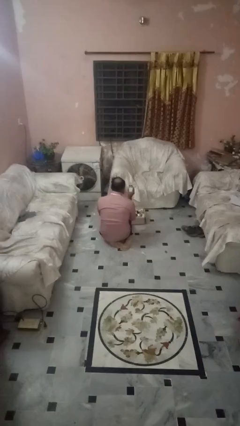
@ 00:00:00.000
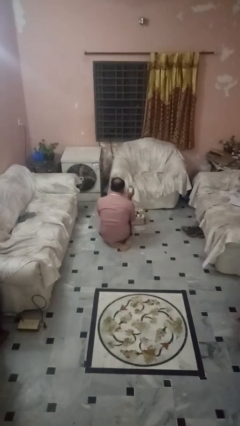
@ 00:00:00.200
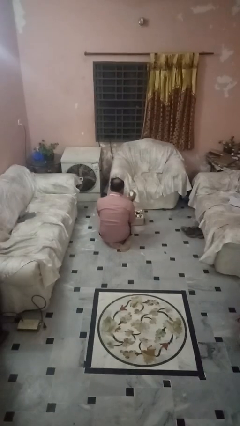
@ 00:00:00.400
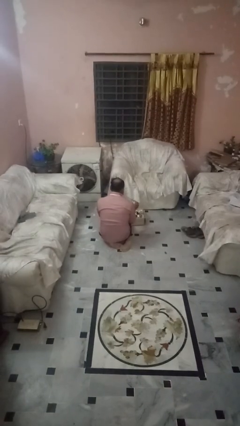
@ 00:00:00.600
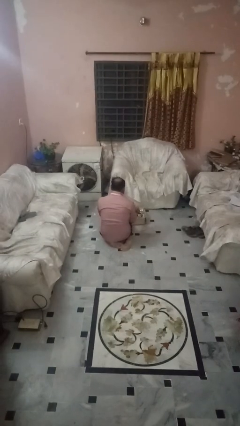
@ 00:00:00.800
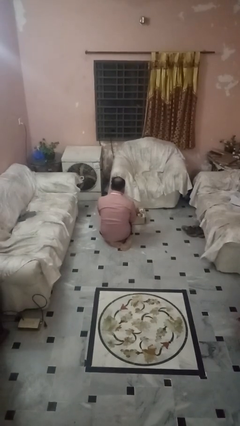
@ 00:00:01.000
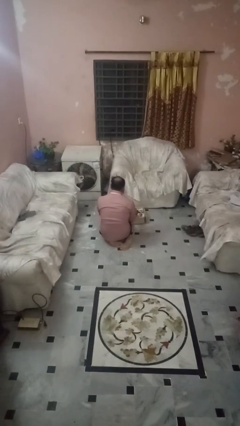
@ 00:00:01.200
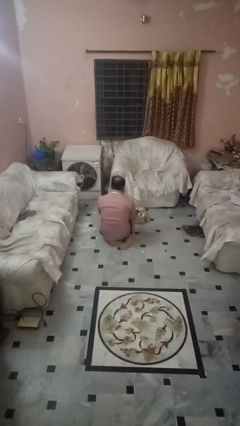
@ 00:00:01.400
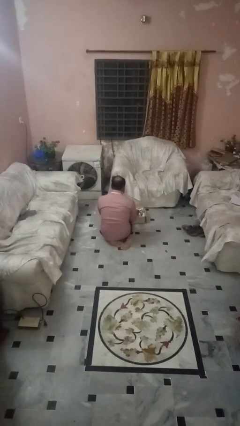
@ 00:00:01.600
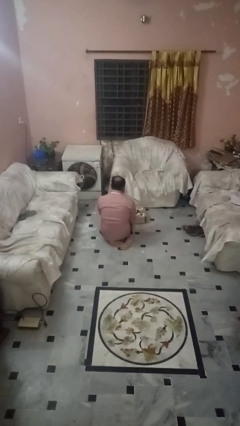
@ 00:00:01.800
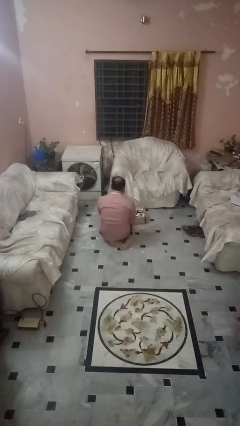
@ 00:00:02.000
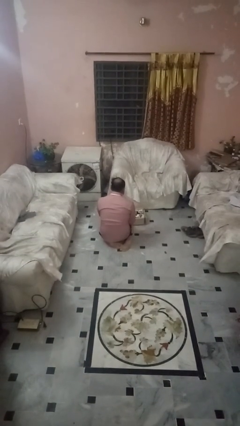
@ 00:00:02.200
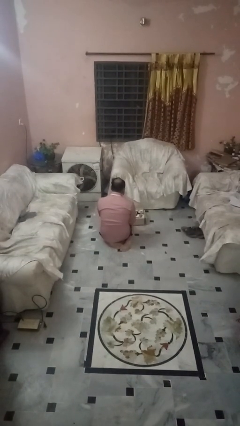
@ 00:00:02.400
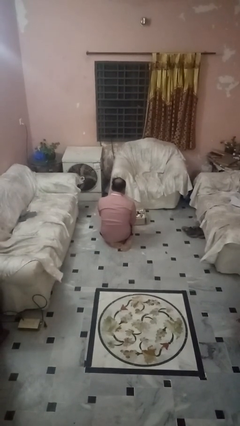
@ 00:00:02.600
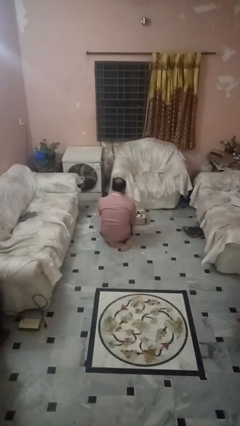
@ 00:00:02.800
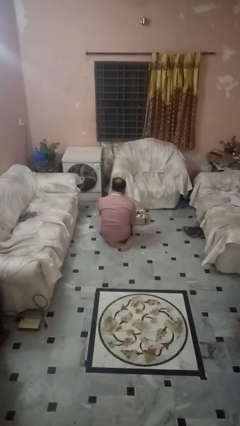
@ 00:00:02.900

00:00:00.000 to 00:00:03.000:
person puts object into box

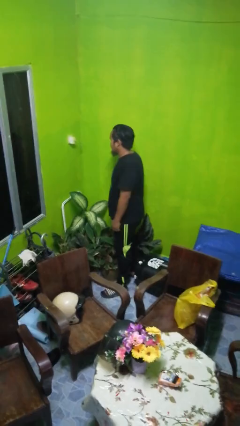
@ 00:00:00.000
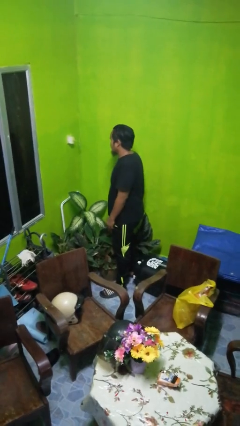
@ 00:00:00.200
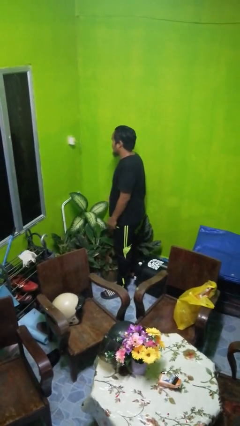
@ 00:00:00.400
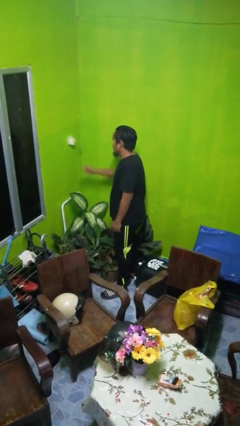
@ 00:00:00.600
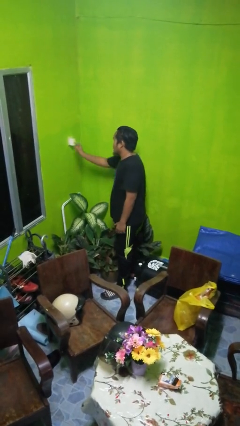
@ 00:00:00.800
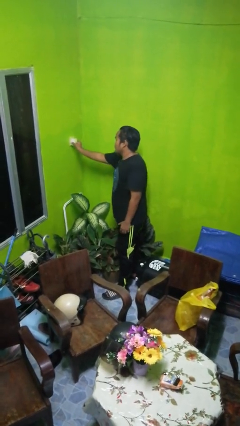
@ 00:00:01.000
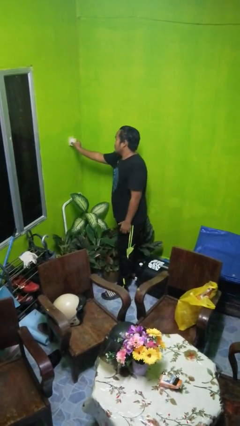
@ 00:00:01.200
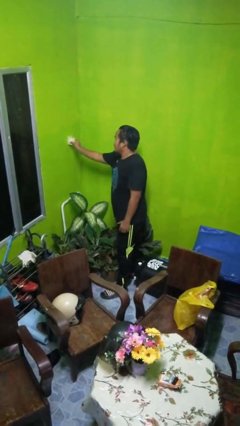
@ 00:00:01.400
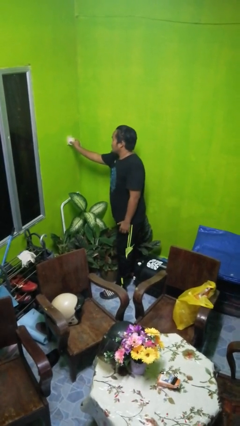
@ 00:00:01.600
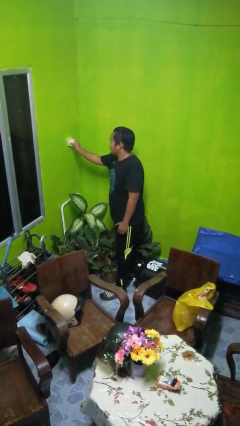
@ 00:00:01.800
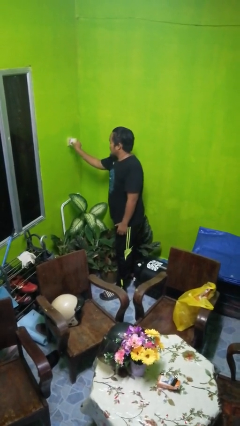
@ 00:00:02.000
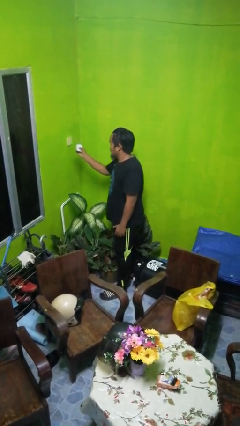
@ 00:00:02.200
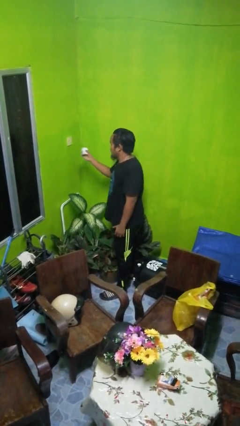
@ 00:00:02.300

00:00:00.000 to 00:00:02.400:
person unplugs from electrical socket

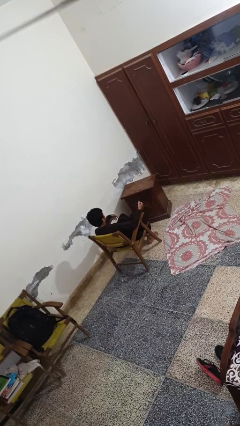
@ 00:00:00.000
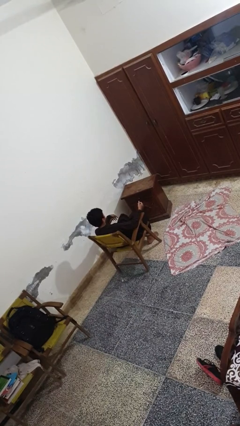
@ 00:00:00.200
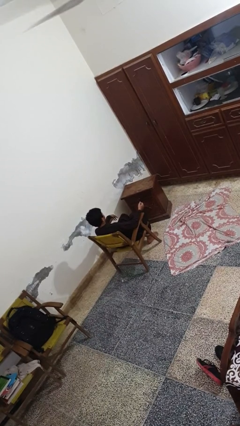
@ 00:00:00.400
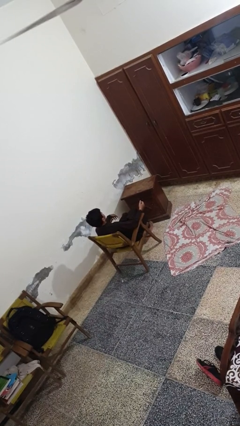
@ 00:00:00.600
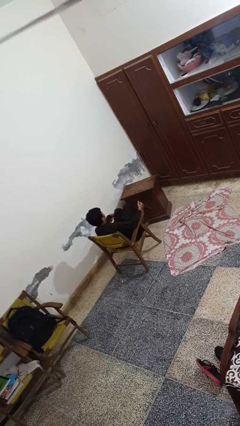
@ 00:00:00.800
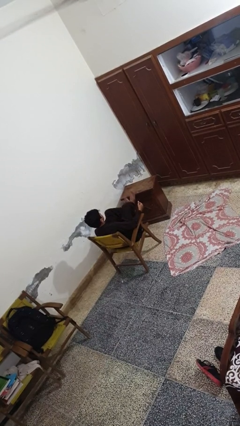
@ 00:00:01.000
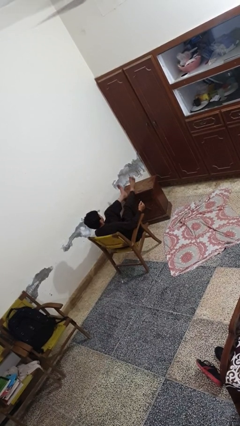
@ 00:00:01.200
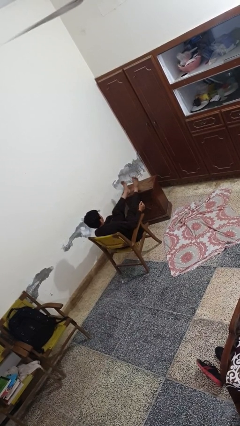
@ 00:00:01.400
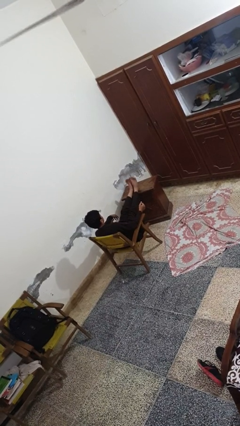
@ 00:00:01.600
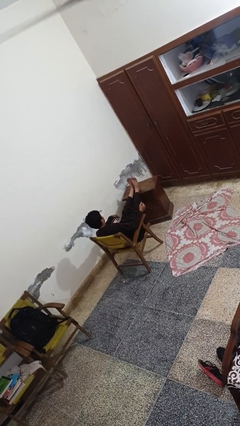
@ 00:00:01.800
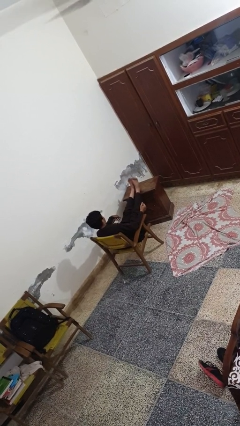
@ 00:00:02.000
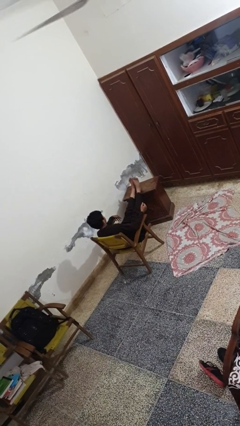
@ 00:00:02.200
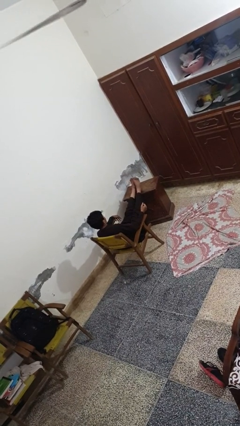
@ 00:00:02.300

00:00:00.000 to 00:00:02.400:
person puts feet up

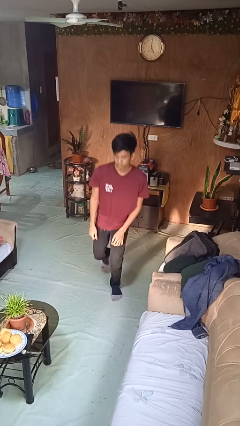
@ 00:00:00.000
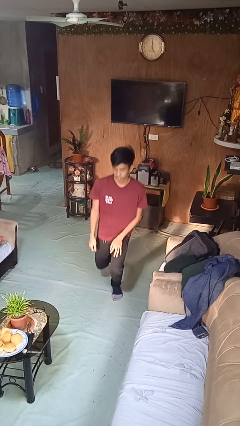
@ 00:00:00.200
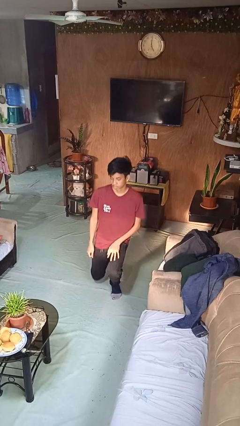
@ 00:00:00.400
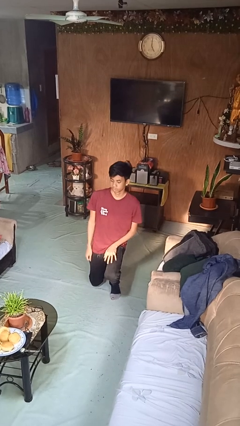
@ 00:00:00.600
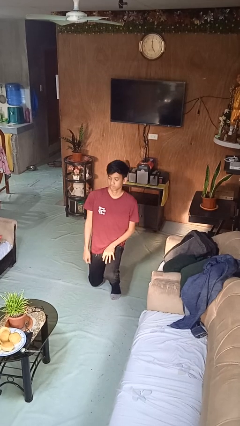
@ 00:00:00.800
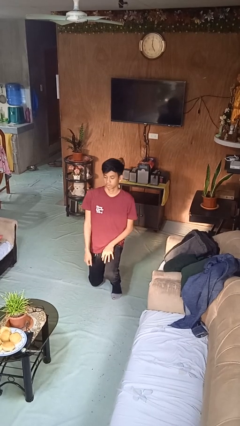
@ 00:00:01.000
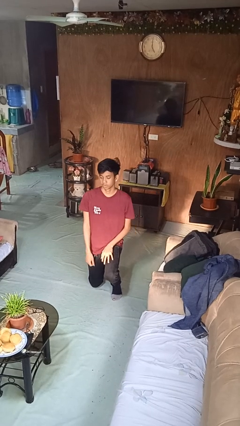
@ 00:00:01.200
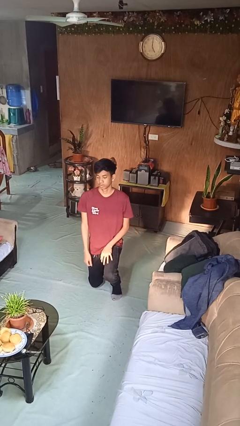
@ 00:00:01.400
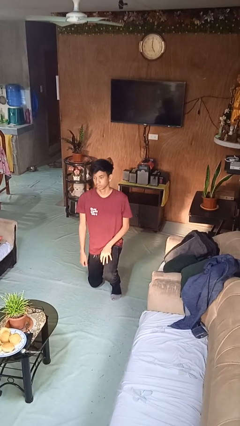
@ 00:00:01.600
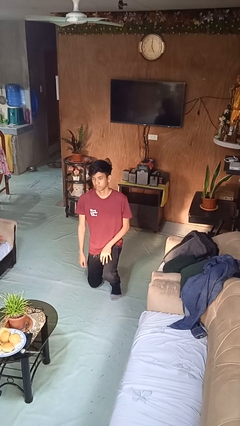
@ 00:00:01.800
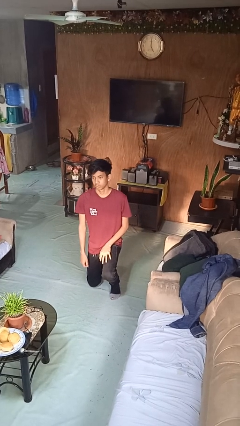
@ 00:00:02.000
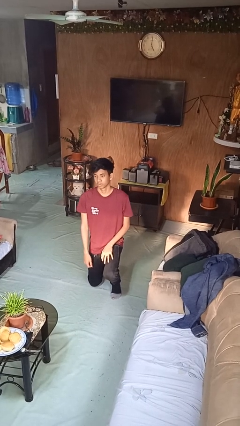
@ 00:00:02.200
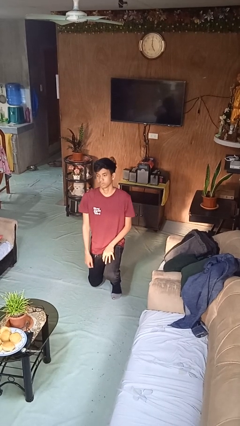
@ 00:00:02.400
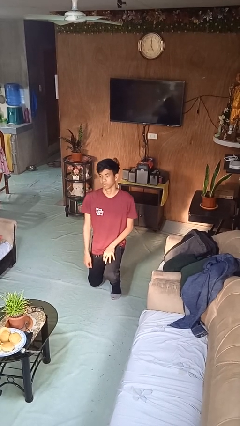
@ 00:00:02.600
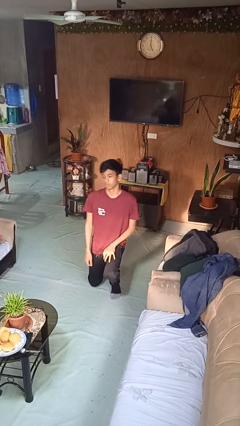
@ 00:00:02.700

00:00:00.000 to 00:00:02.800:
person kneels

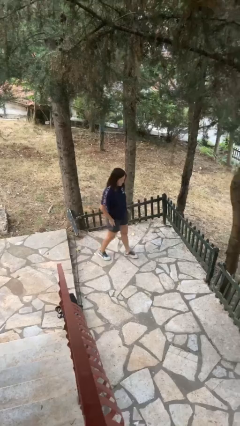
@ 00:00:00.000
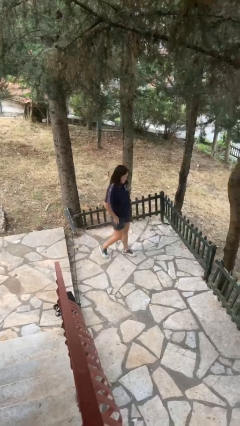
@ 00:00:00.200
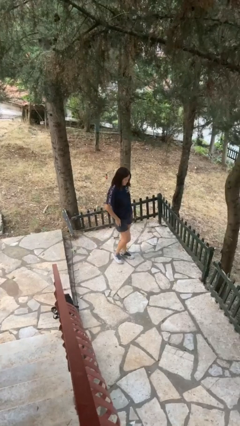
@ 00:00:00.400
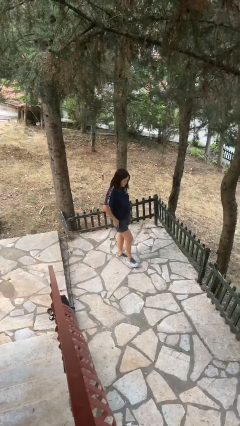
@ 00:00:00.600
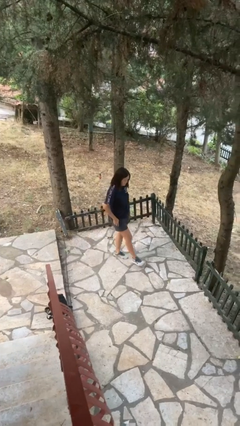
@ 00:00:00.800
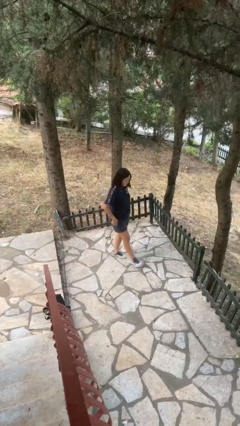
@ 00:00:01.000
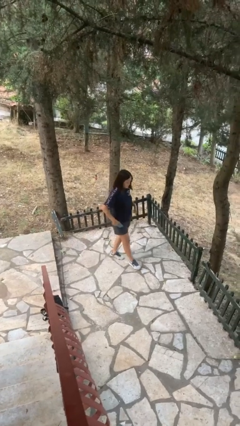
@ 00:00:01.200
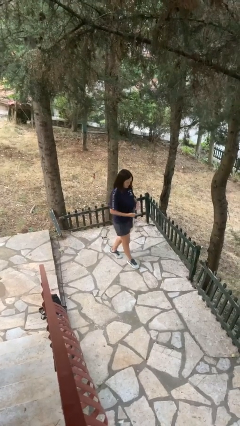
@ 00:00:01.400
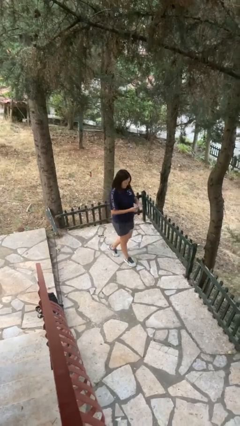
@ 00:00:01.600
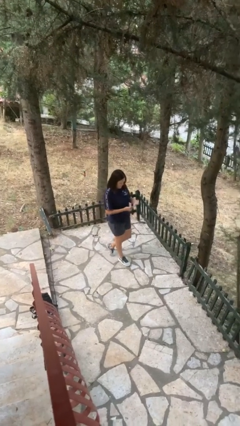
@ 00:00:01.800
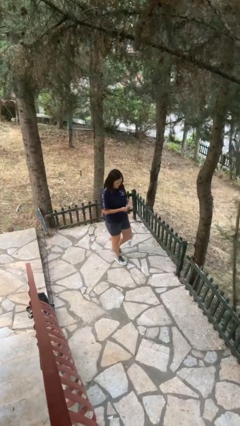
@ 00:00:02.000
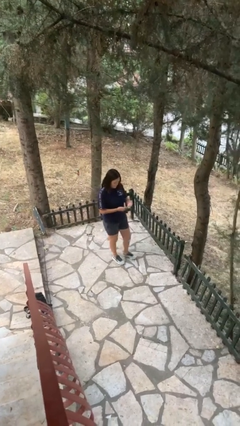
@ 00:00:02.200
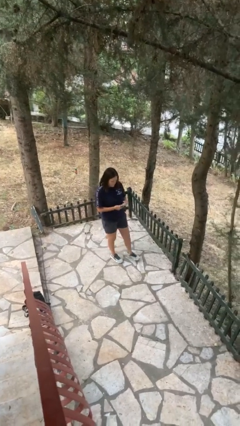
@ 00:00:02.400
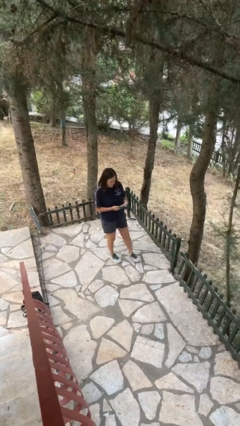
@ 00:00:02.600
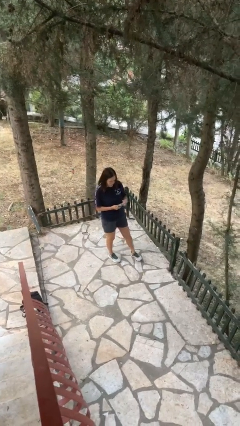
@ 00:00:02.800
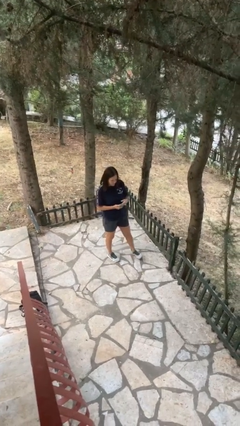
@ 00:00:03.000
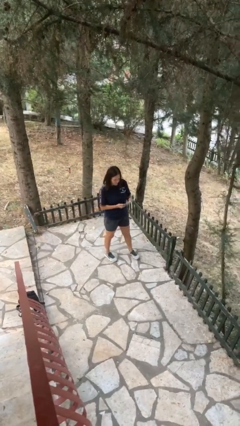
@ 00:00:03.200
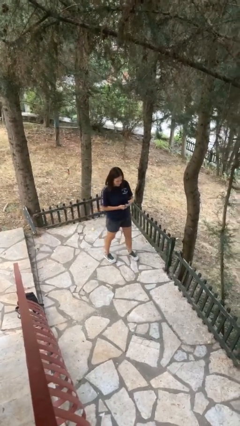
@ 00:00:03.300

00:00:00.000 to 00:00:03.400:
person takes phone from pocket

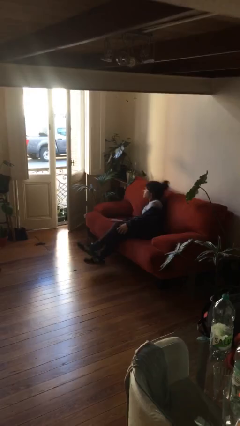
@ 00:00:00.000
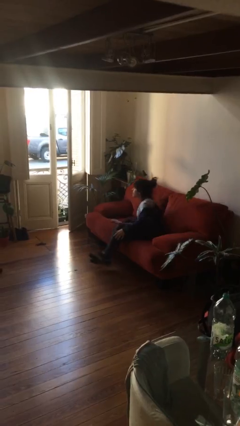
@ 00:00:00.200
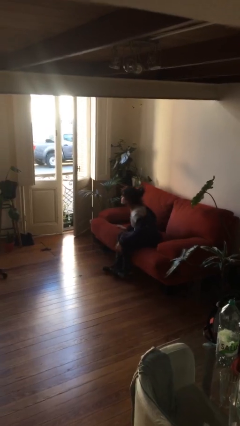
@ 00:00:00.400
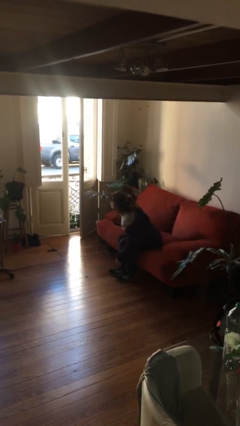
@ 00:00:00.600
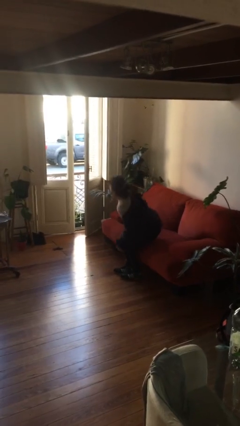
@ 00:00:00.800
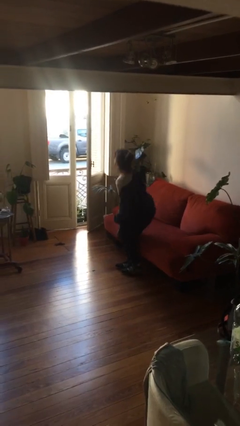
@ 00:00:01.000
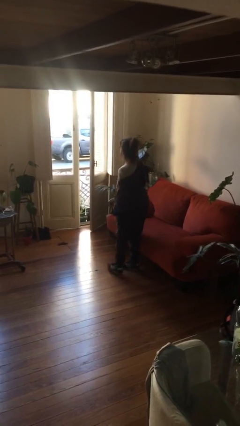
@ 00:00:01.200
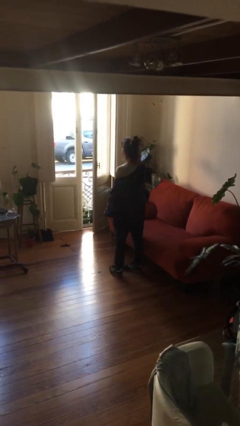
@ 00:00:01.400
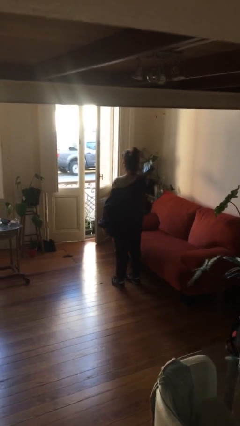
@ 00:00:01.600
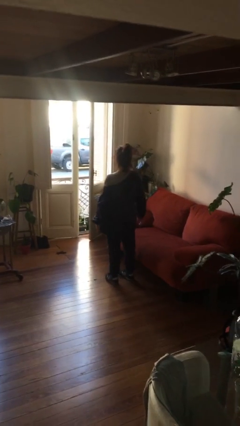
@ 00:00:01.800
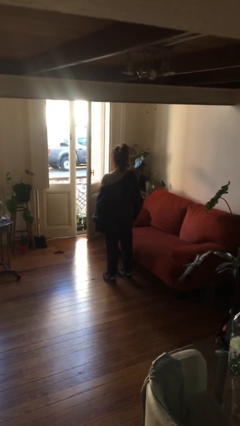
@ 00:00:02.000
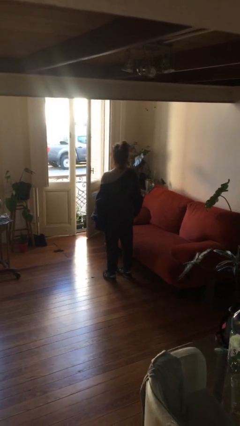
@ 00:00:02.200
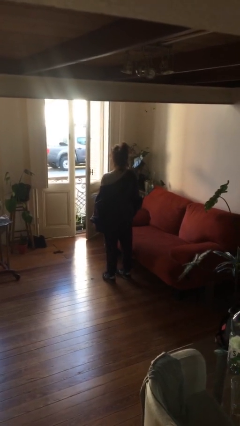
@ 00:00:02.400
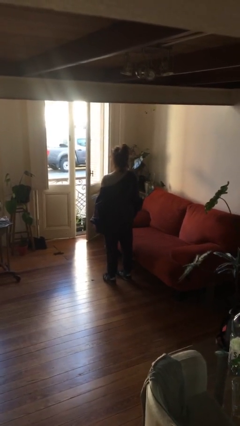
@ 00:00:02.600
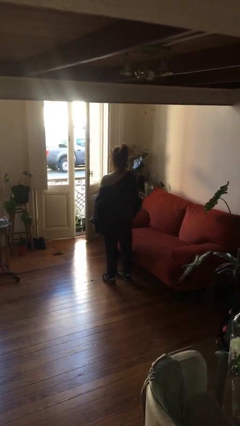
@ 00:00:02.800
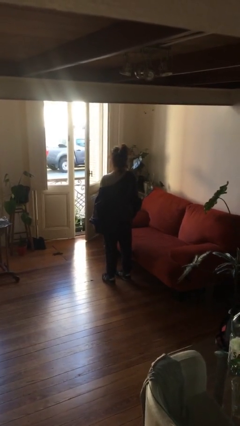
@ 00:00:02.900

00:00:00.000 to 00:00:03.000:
person stands up
